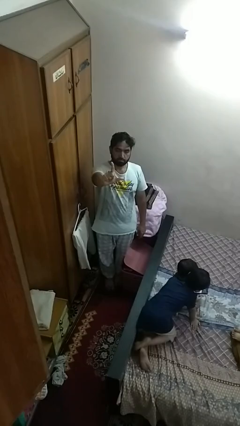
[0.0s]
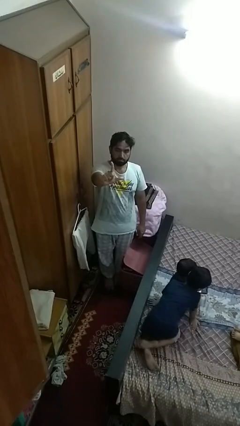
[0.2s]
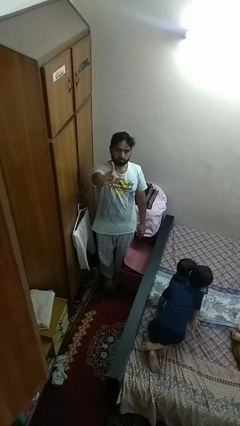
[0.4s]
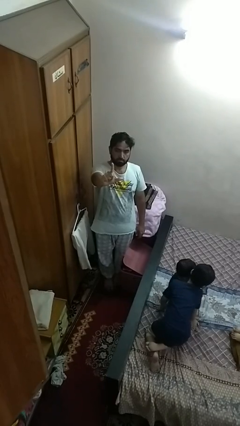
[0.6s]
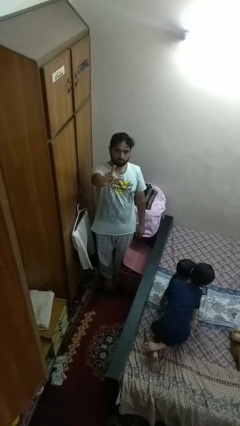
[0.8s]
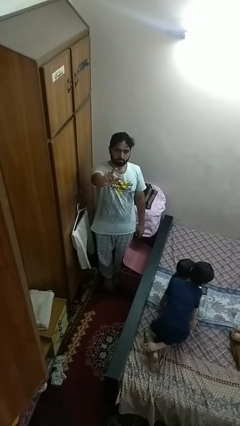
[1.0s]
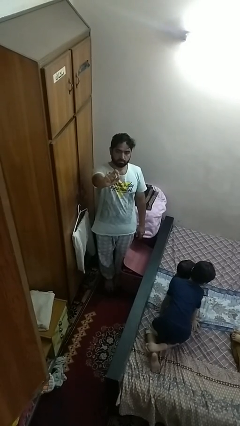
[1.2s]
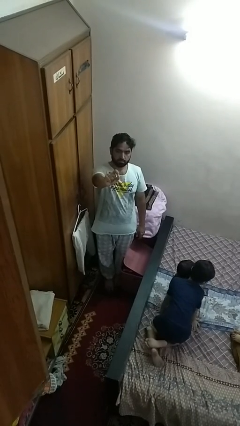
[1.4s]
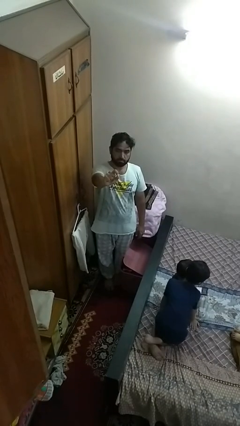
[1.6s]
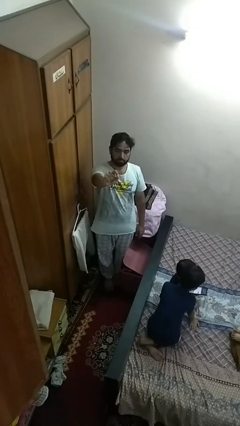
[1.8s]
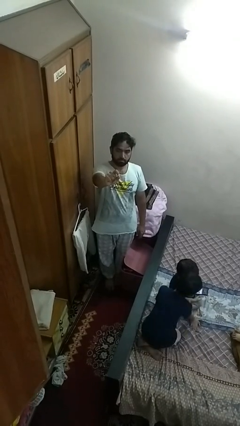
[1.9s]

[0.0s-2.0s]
person gestures zoom in

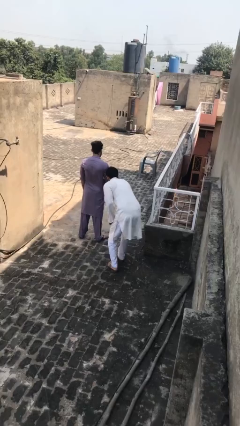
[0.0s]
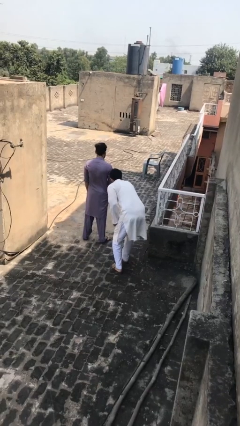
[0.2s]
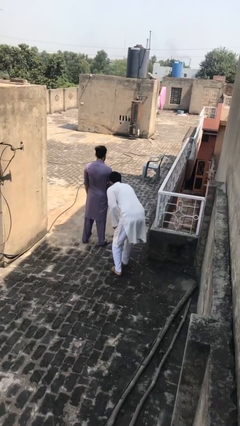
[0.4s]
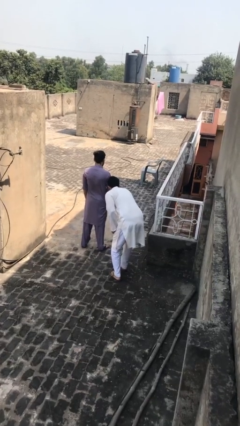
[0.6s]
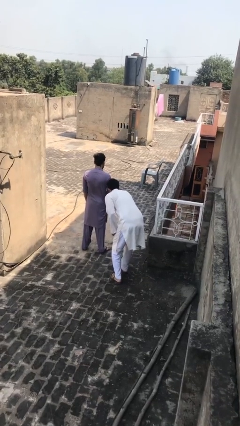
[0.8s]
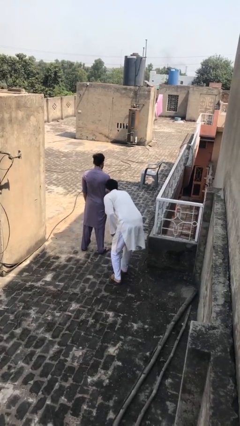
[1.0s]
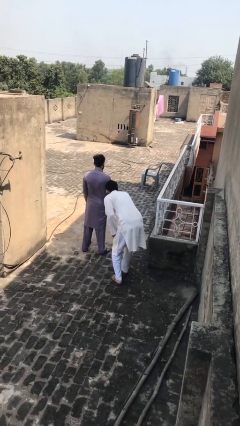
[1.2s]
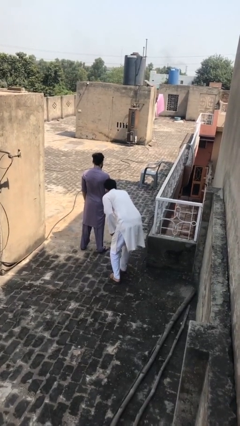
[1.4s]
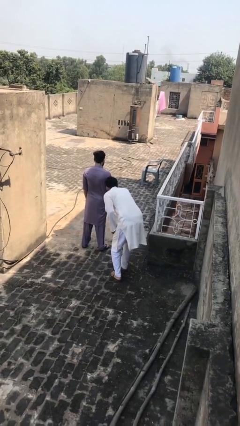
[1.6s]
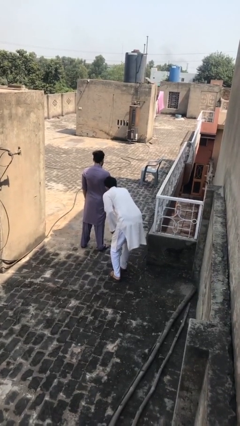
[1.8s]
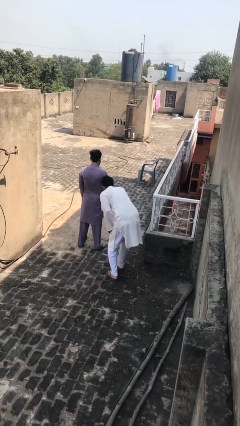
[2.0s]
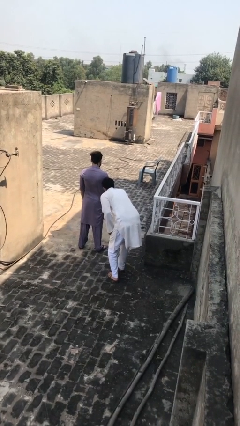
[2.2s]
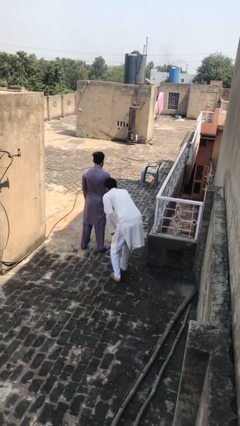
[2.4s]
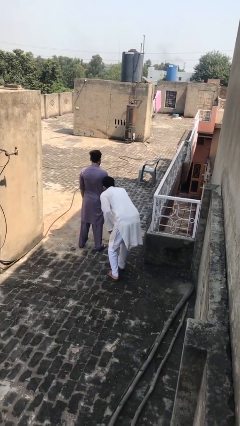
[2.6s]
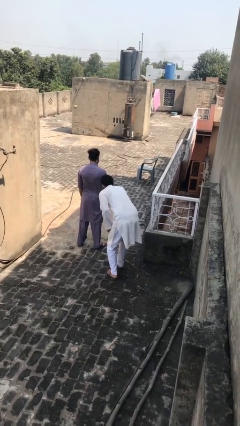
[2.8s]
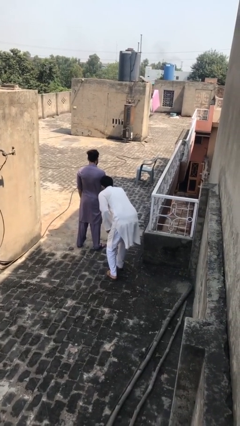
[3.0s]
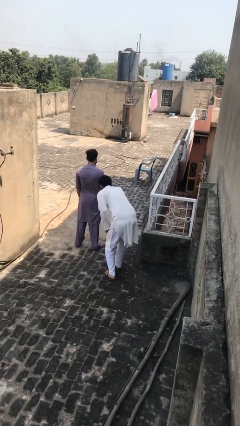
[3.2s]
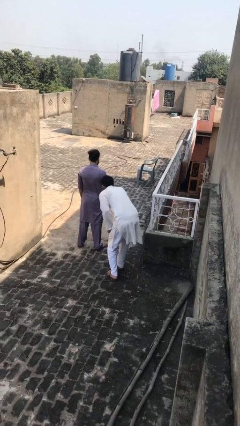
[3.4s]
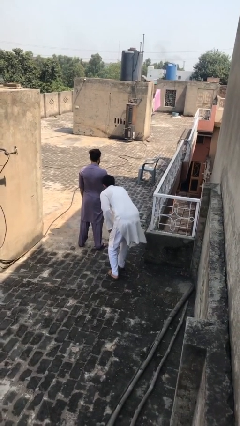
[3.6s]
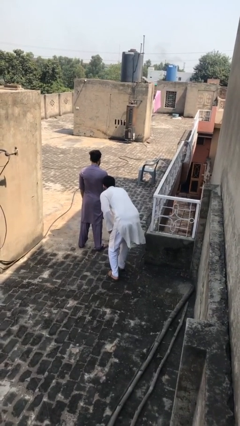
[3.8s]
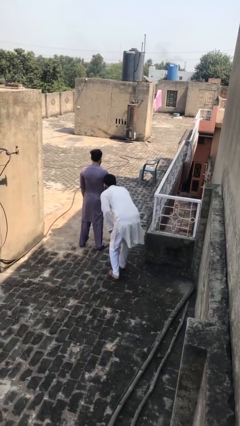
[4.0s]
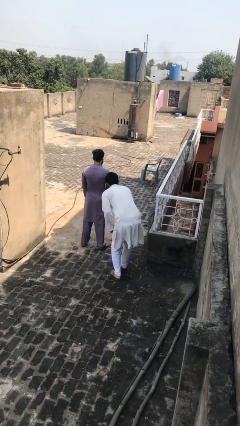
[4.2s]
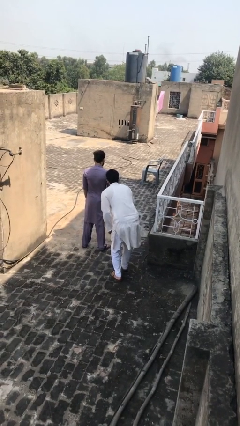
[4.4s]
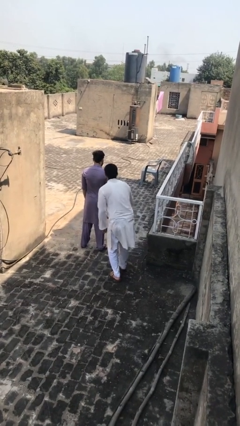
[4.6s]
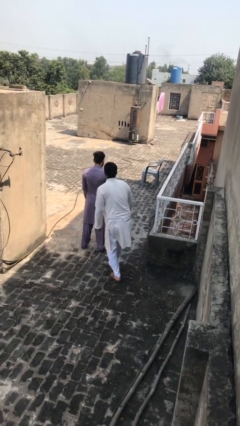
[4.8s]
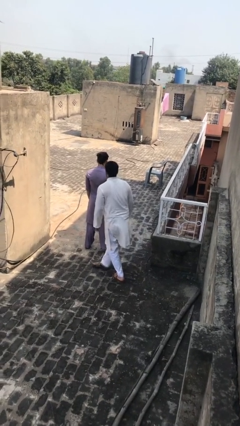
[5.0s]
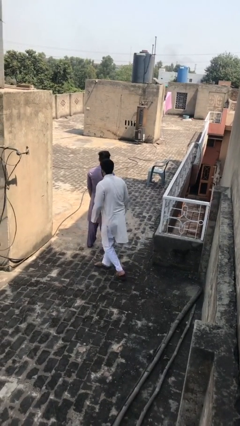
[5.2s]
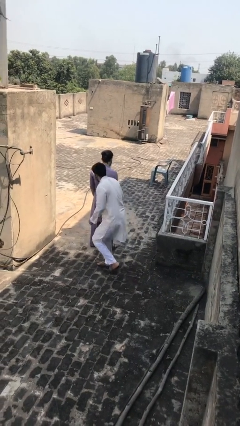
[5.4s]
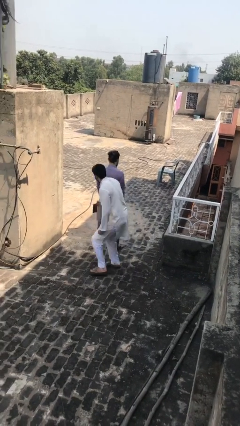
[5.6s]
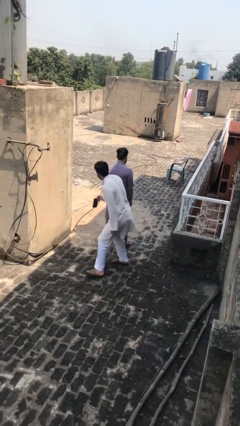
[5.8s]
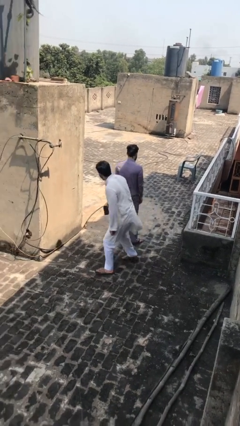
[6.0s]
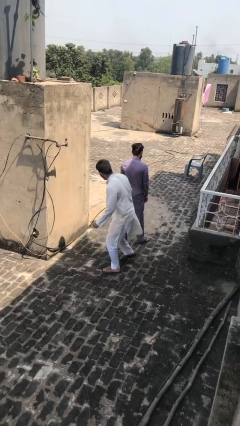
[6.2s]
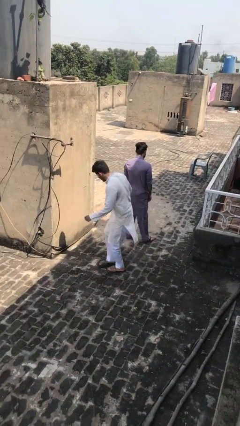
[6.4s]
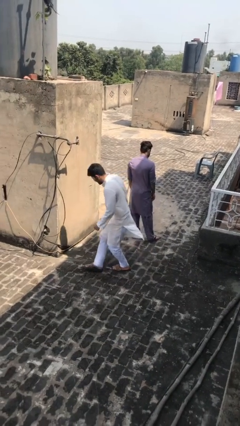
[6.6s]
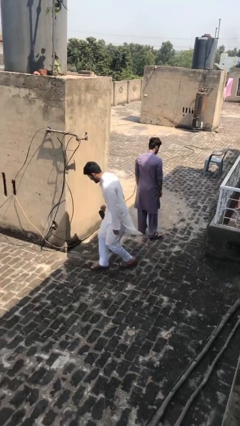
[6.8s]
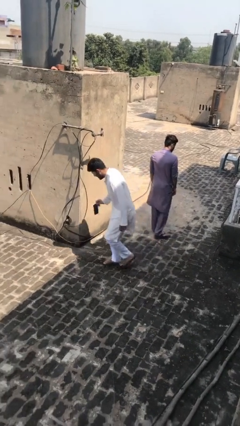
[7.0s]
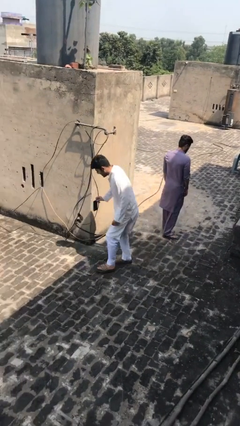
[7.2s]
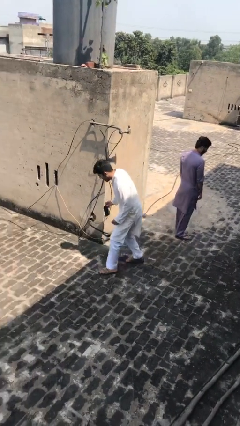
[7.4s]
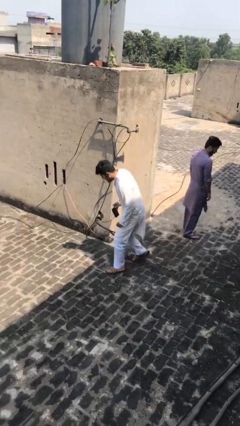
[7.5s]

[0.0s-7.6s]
person steals object from person

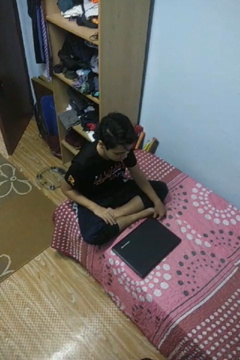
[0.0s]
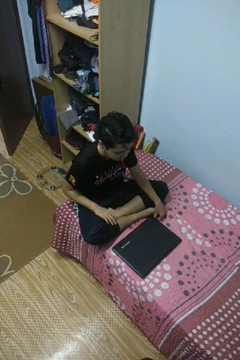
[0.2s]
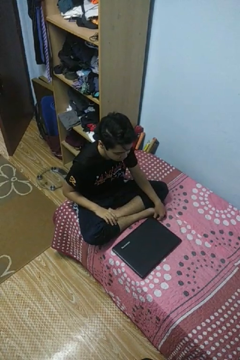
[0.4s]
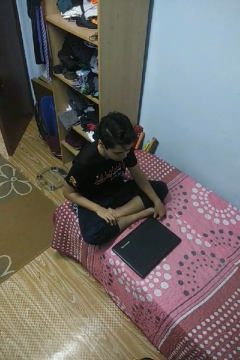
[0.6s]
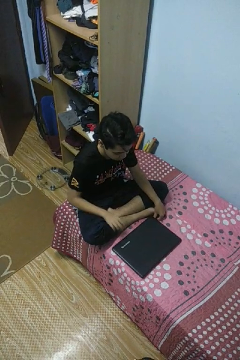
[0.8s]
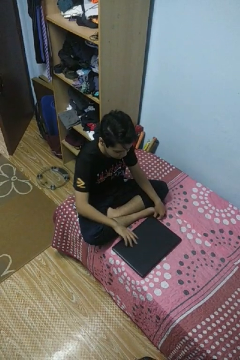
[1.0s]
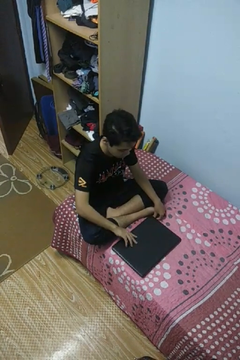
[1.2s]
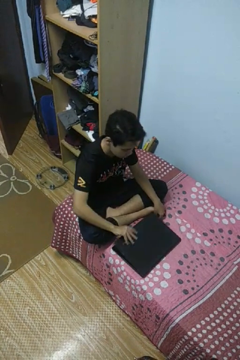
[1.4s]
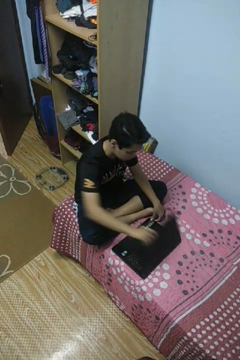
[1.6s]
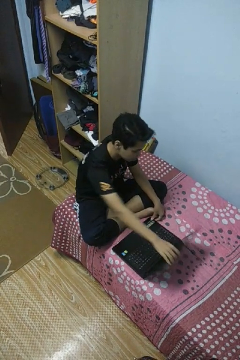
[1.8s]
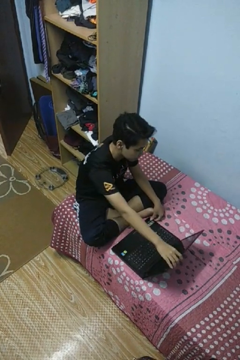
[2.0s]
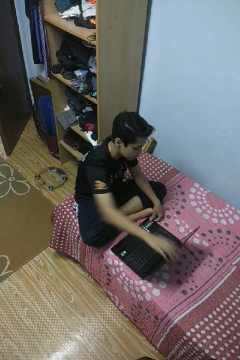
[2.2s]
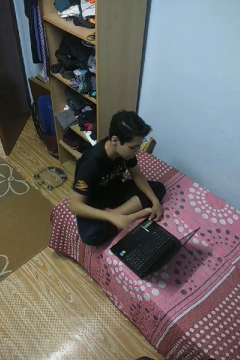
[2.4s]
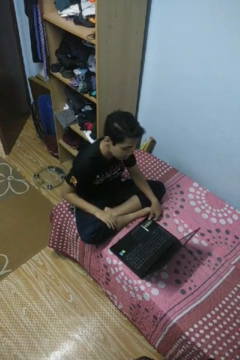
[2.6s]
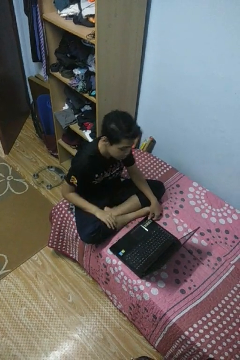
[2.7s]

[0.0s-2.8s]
person opens laptop

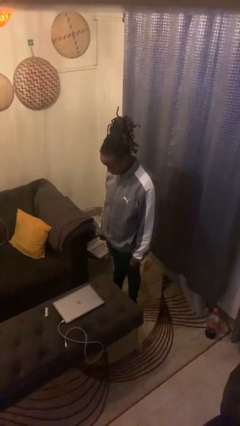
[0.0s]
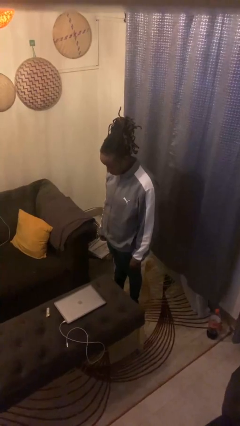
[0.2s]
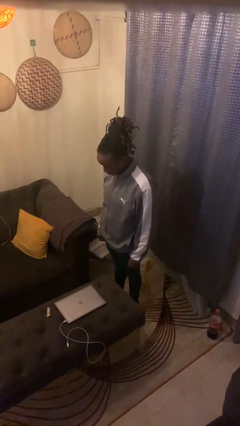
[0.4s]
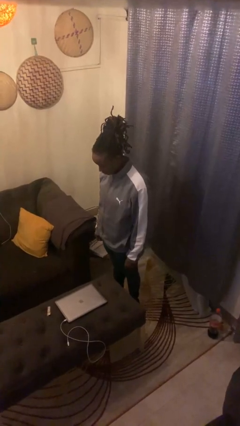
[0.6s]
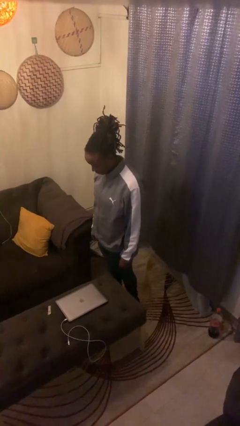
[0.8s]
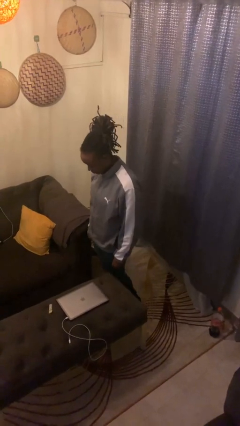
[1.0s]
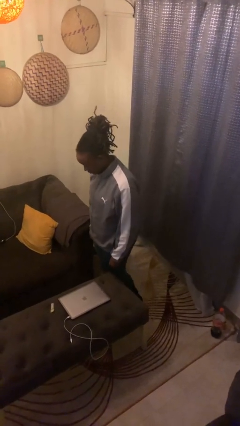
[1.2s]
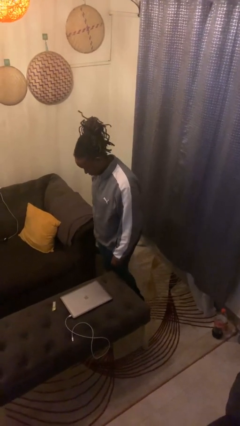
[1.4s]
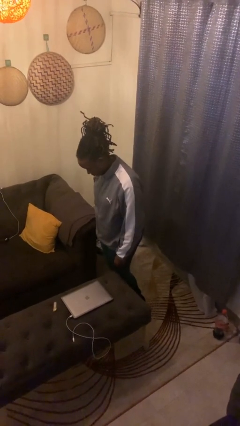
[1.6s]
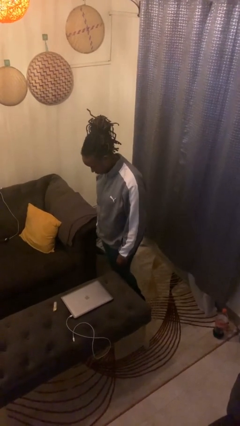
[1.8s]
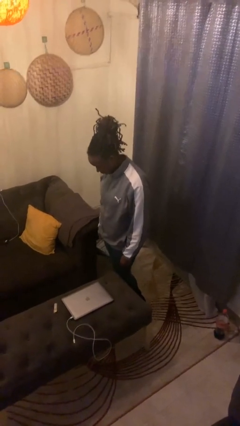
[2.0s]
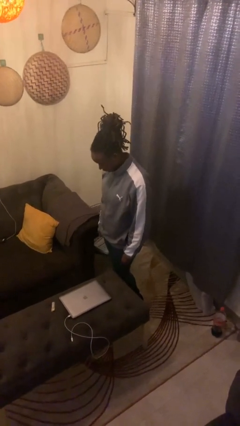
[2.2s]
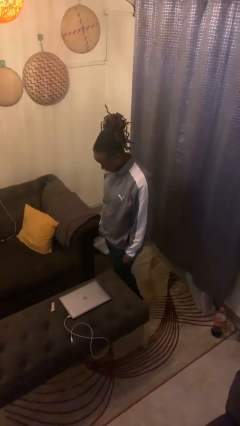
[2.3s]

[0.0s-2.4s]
person bumps into table

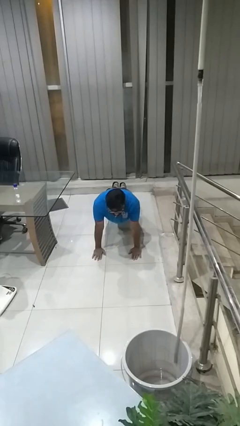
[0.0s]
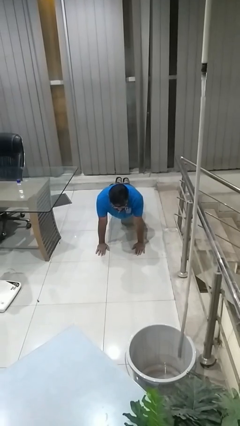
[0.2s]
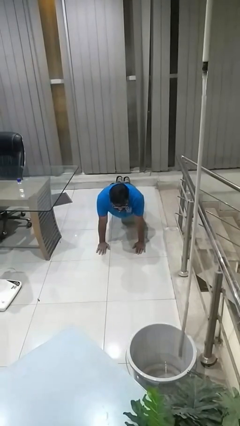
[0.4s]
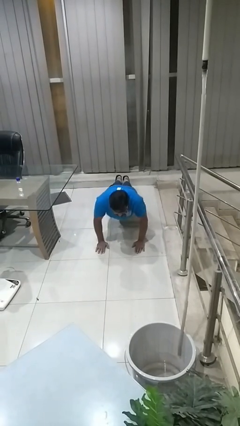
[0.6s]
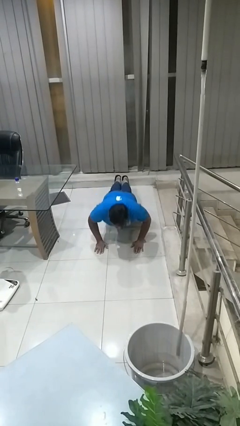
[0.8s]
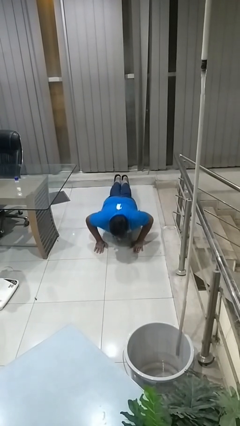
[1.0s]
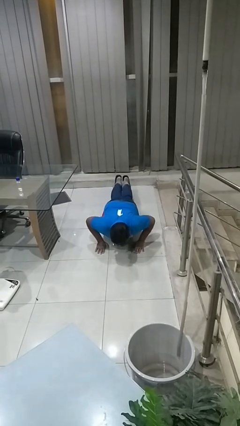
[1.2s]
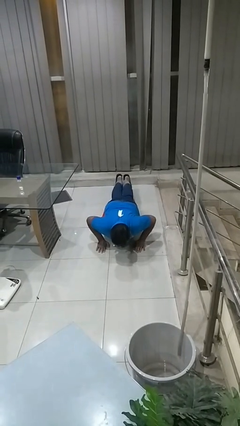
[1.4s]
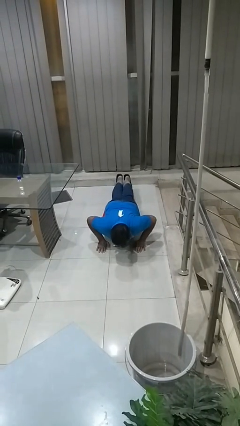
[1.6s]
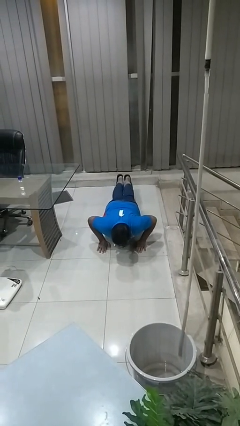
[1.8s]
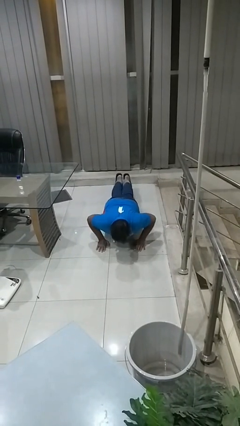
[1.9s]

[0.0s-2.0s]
person exercises with pushup

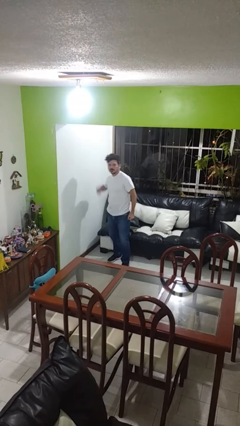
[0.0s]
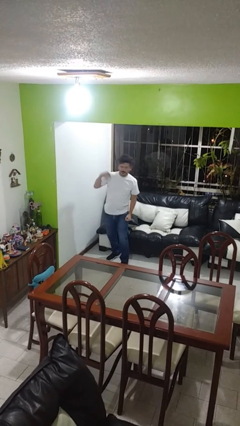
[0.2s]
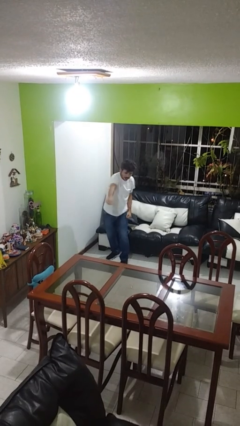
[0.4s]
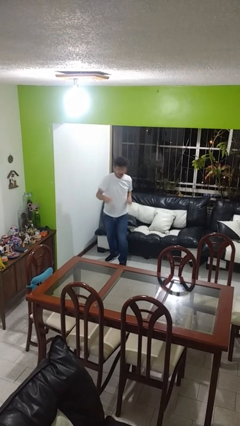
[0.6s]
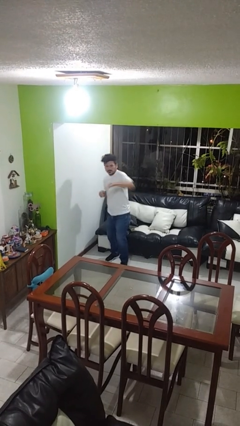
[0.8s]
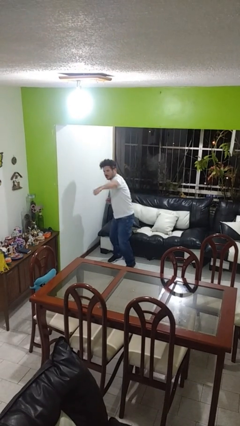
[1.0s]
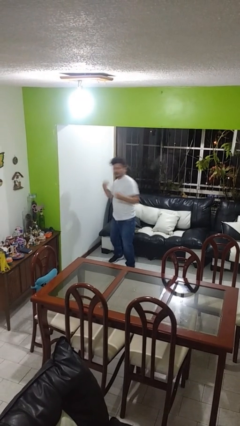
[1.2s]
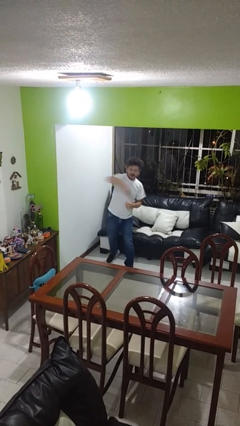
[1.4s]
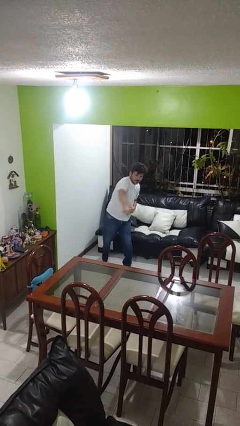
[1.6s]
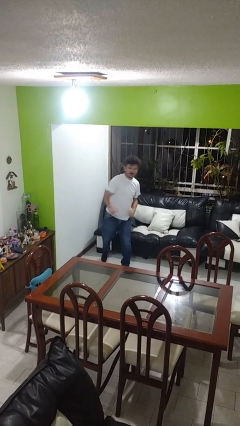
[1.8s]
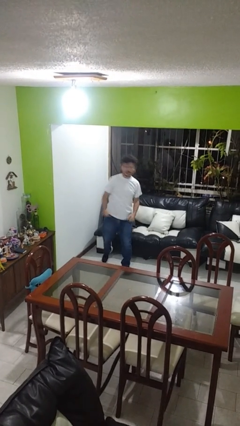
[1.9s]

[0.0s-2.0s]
person punches
